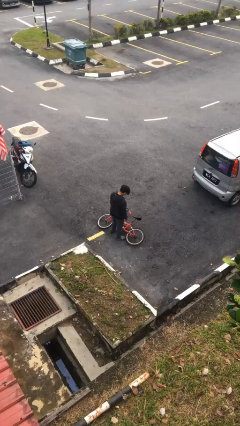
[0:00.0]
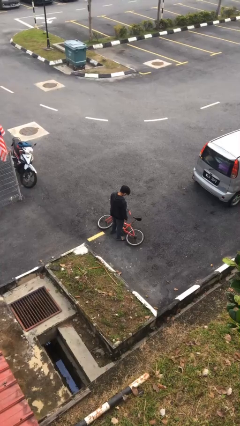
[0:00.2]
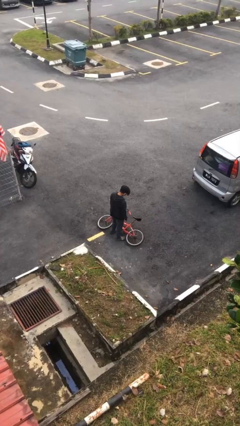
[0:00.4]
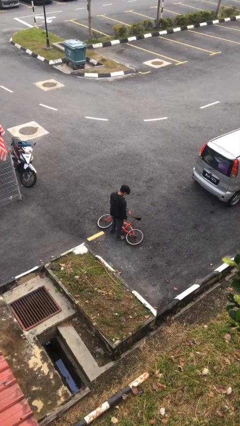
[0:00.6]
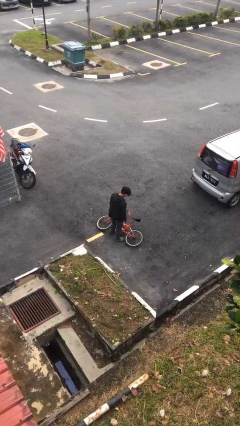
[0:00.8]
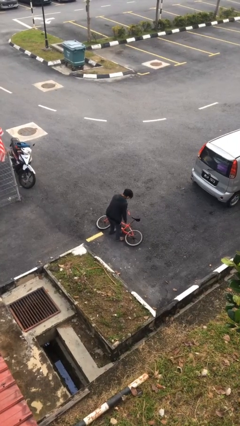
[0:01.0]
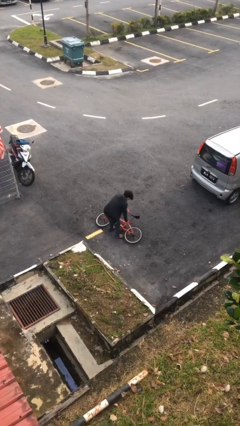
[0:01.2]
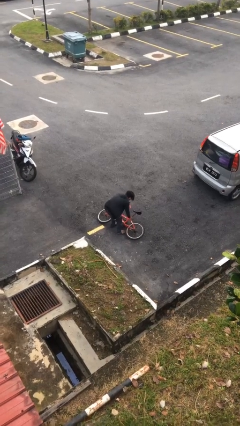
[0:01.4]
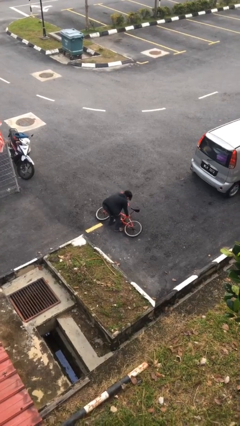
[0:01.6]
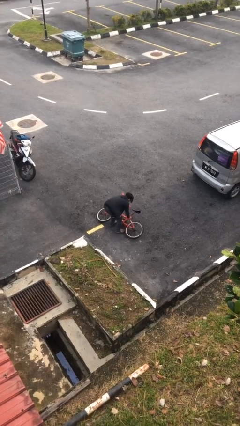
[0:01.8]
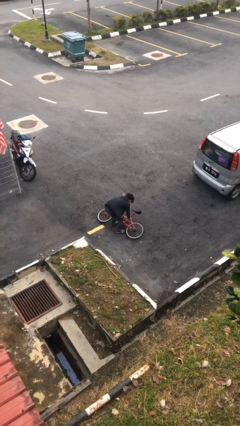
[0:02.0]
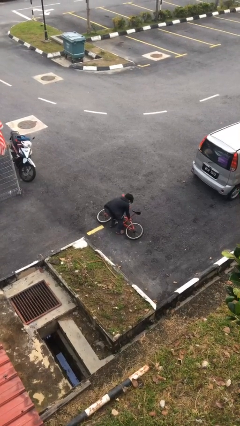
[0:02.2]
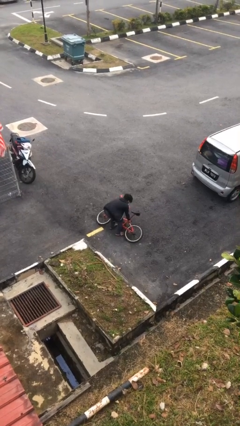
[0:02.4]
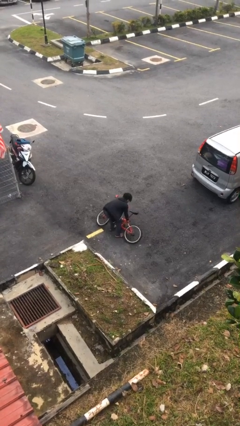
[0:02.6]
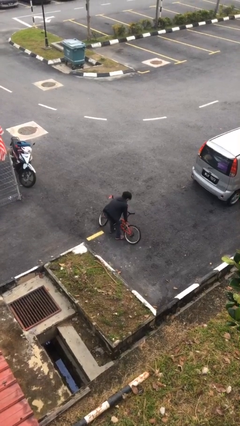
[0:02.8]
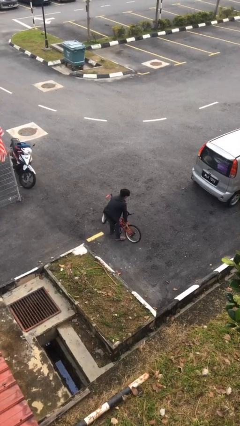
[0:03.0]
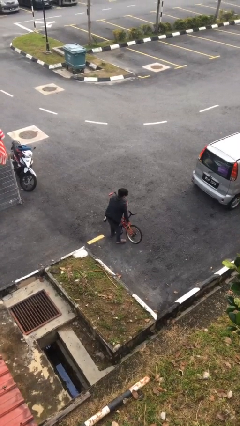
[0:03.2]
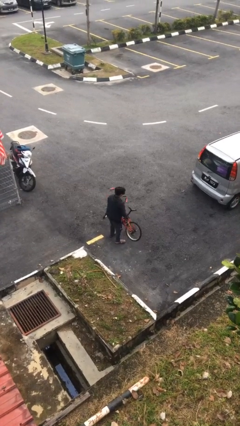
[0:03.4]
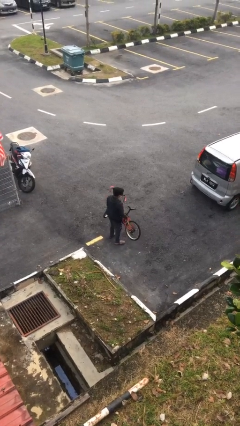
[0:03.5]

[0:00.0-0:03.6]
person picks up object from floor

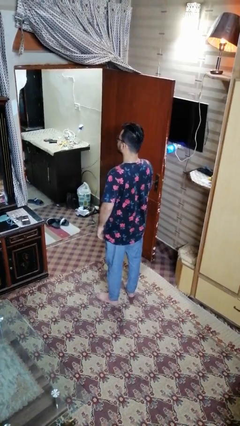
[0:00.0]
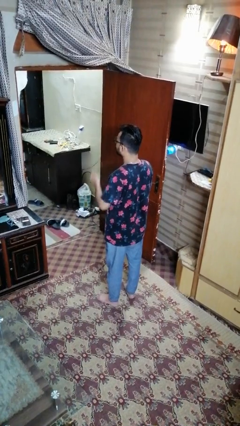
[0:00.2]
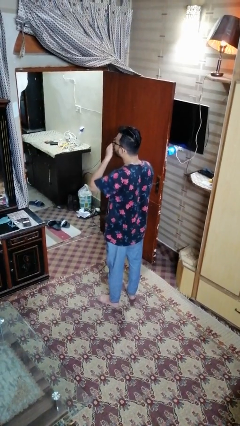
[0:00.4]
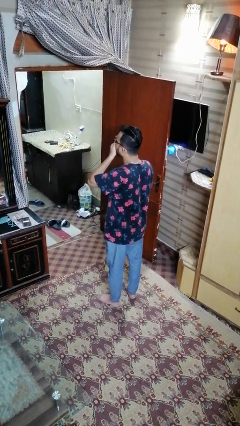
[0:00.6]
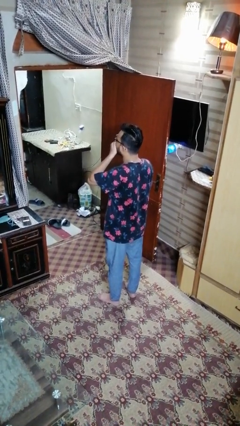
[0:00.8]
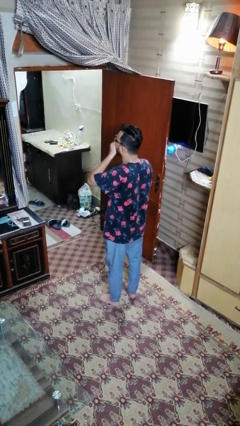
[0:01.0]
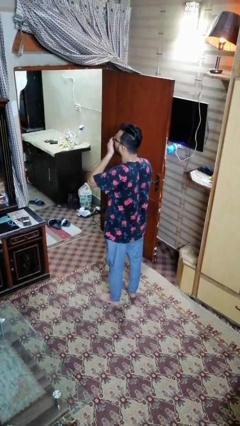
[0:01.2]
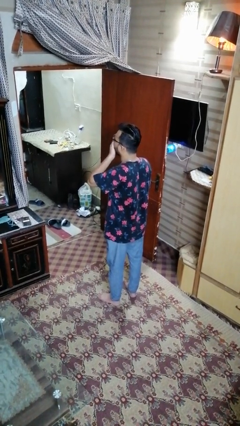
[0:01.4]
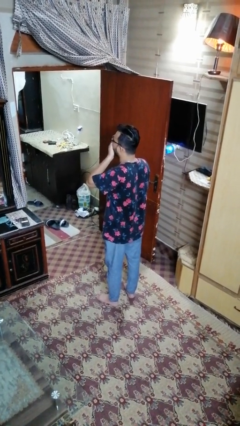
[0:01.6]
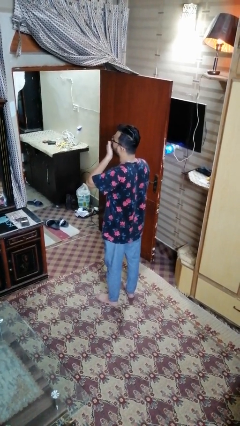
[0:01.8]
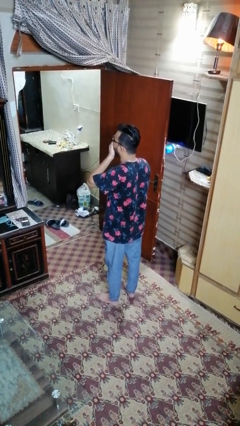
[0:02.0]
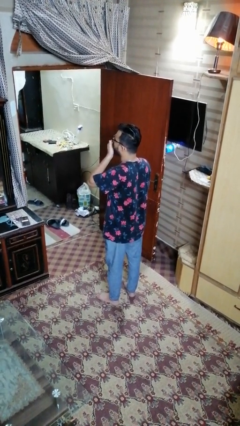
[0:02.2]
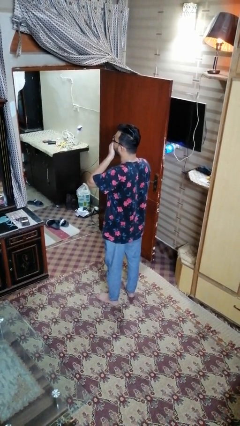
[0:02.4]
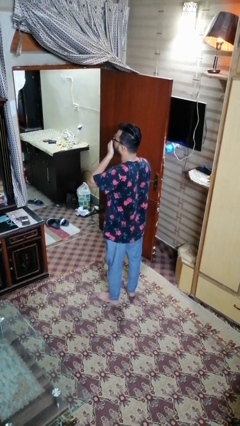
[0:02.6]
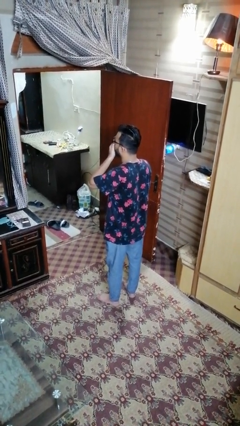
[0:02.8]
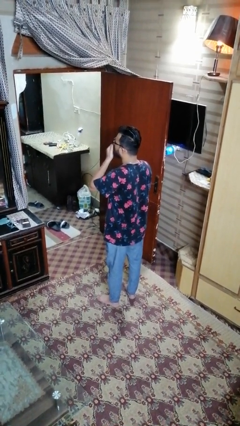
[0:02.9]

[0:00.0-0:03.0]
person yawns

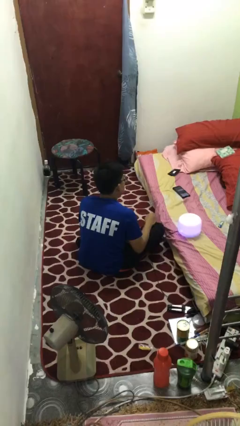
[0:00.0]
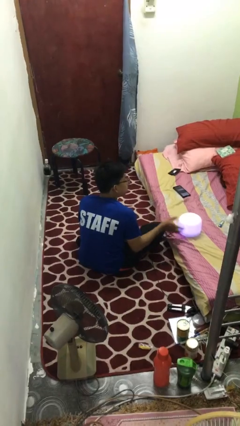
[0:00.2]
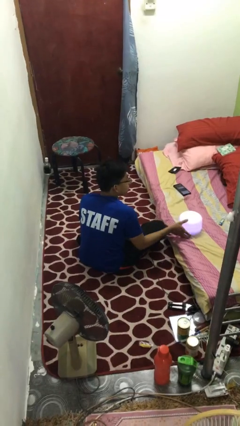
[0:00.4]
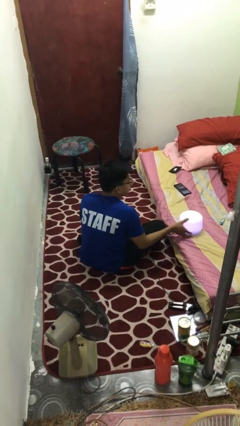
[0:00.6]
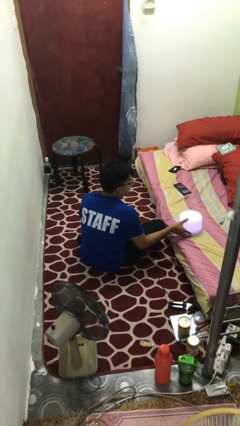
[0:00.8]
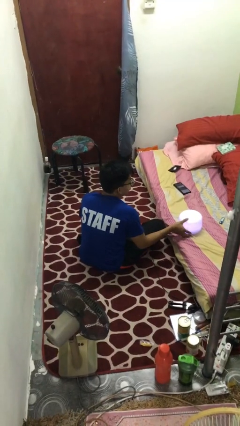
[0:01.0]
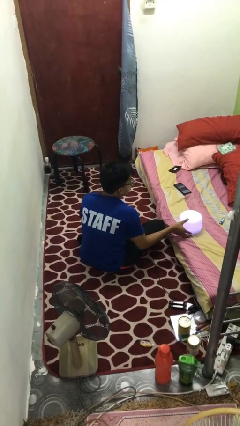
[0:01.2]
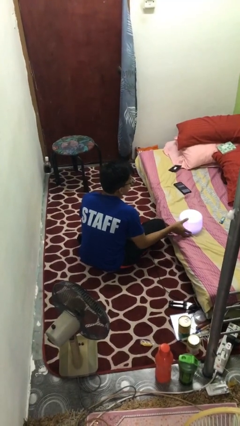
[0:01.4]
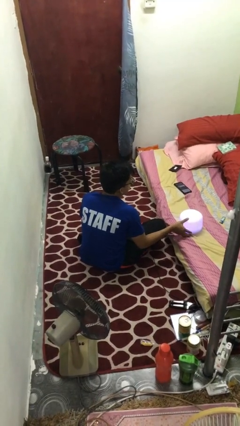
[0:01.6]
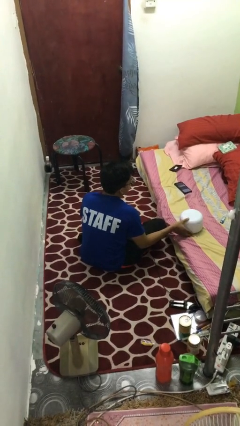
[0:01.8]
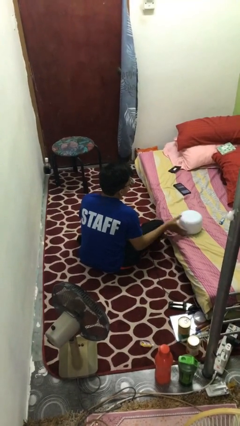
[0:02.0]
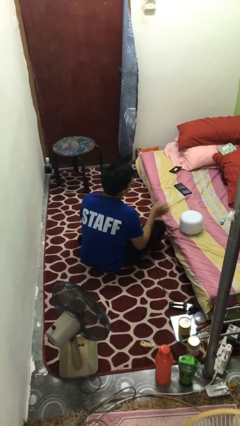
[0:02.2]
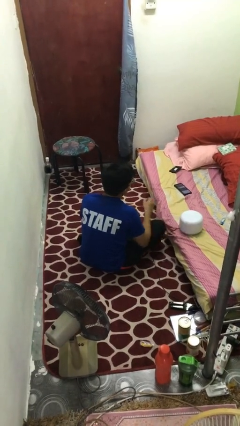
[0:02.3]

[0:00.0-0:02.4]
person turns off lamp

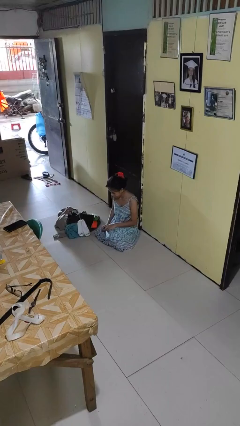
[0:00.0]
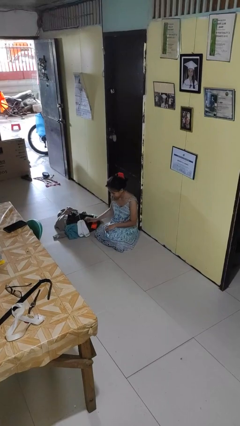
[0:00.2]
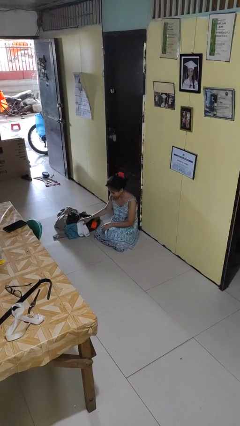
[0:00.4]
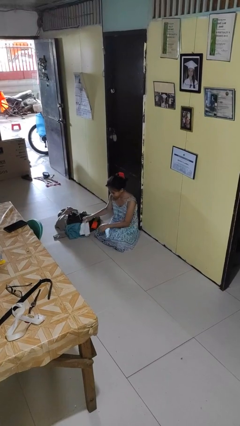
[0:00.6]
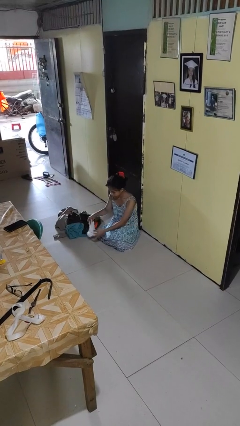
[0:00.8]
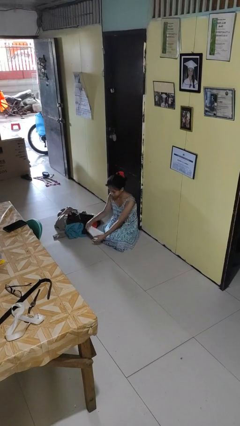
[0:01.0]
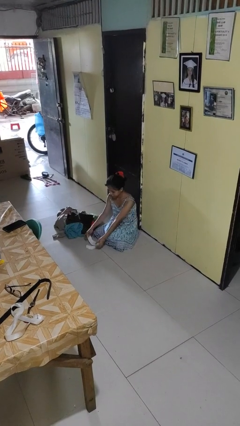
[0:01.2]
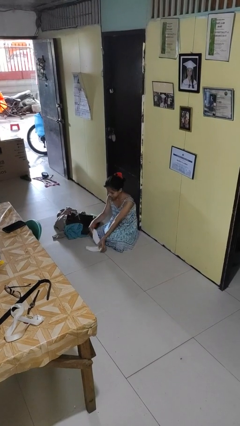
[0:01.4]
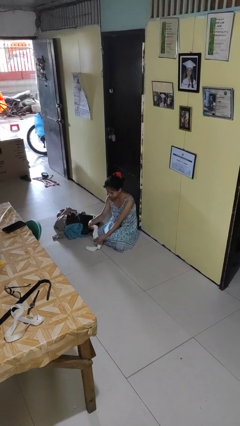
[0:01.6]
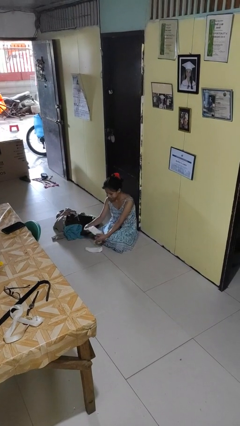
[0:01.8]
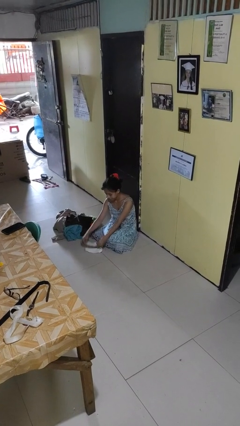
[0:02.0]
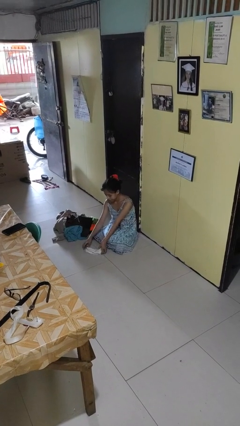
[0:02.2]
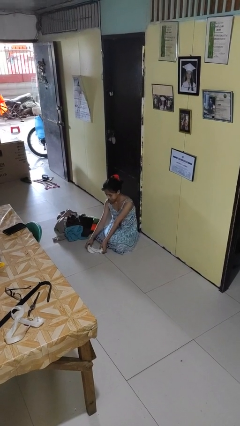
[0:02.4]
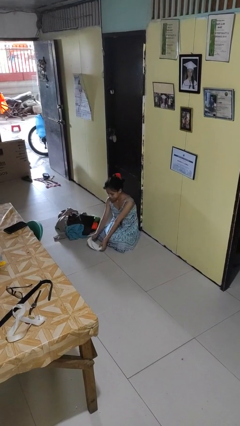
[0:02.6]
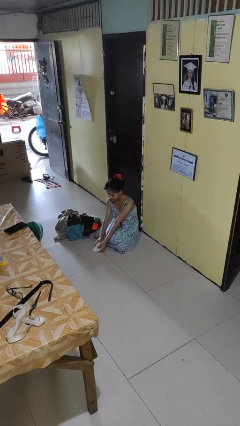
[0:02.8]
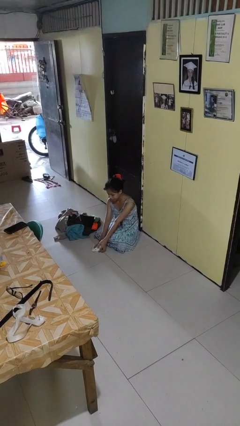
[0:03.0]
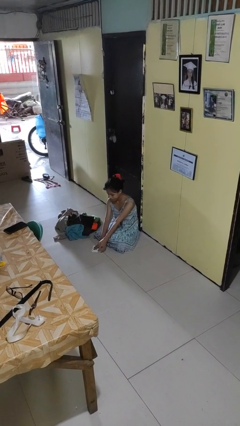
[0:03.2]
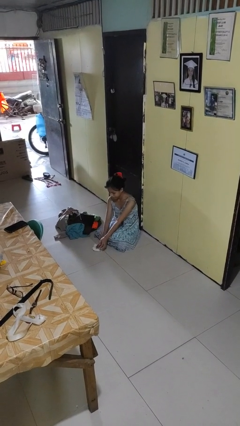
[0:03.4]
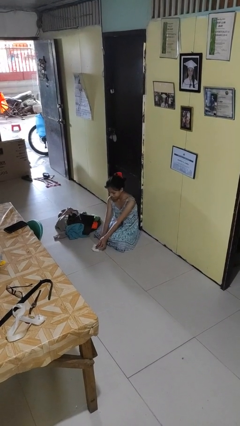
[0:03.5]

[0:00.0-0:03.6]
person folds socks

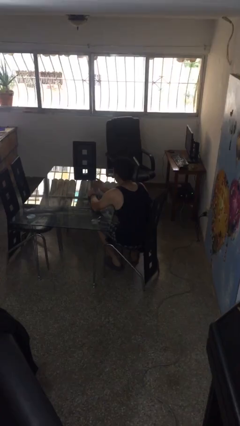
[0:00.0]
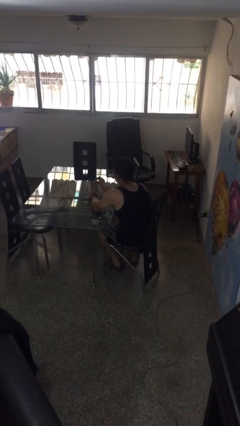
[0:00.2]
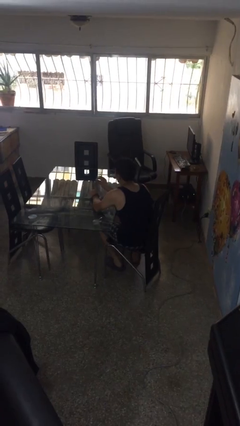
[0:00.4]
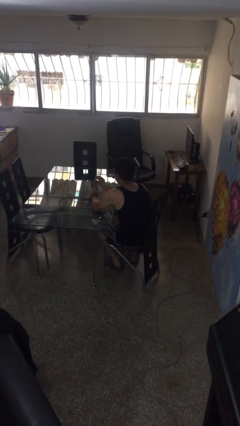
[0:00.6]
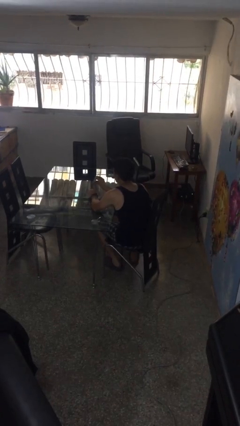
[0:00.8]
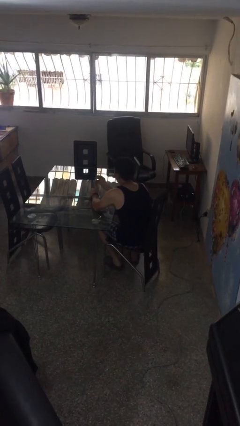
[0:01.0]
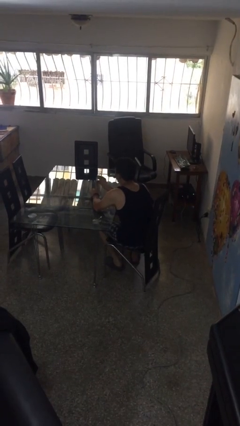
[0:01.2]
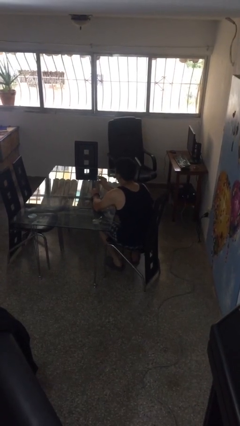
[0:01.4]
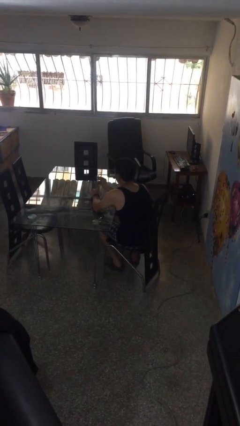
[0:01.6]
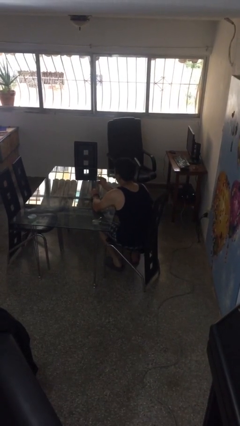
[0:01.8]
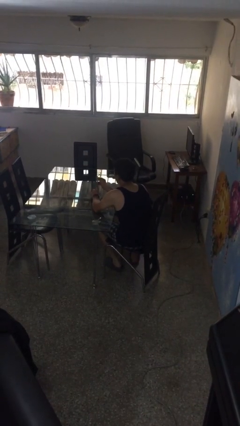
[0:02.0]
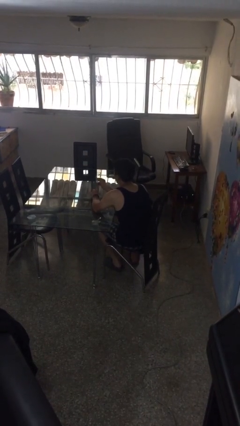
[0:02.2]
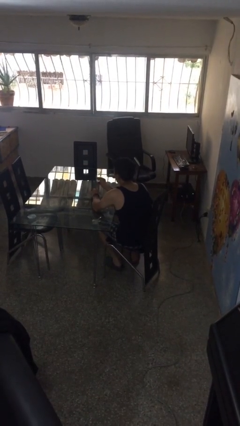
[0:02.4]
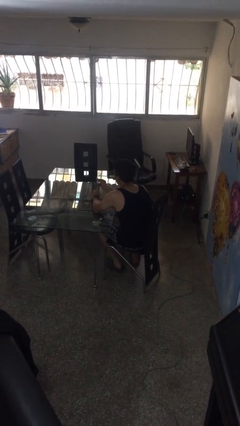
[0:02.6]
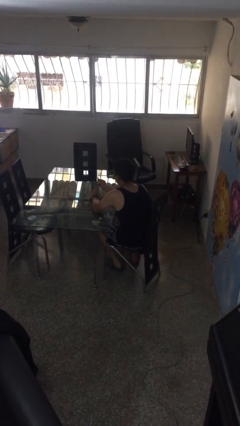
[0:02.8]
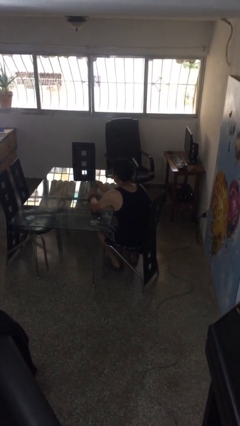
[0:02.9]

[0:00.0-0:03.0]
person clips fingernails

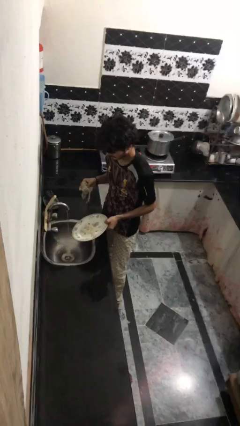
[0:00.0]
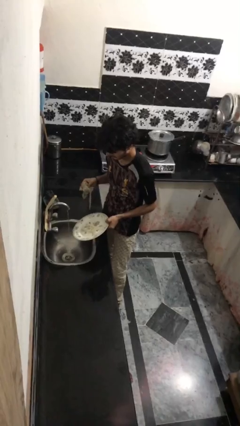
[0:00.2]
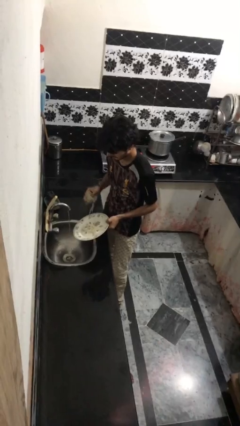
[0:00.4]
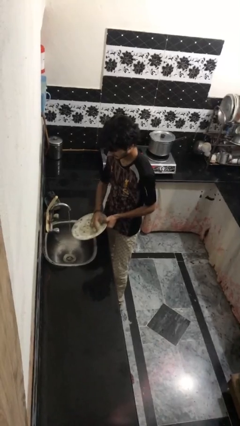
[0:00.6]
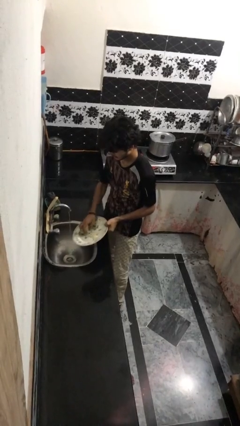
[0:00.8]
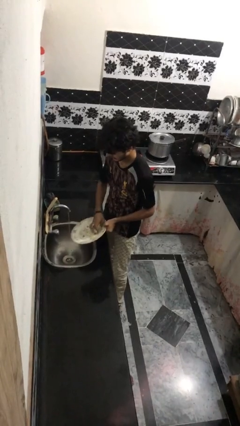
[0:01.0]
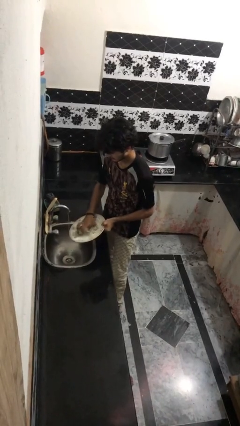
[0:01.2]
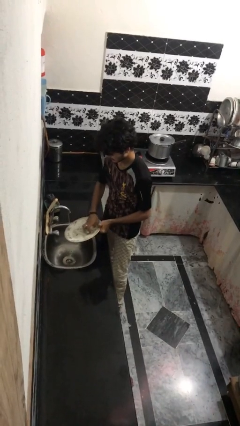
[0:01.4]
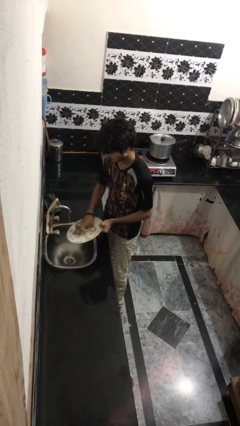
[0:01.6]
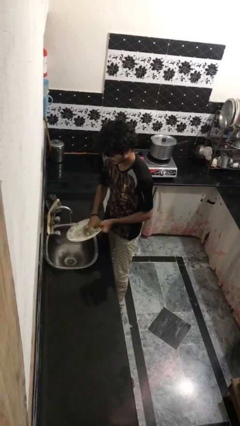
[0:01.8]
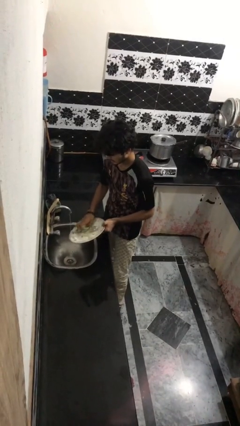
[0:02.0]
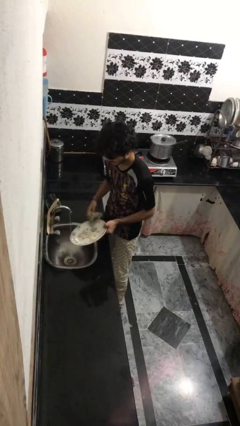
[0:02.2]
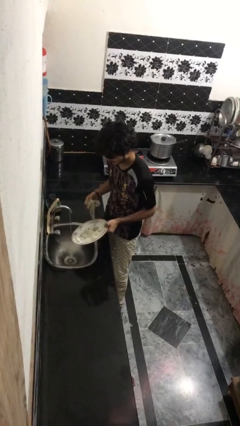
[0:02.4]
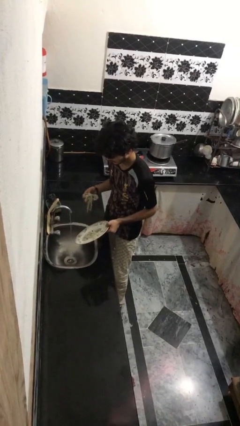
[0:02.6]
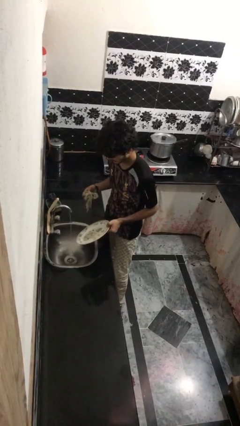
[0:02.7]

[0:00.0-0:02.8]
person washes dish
